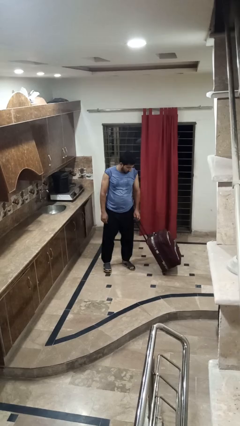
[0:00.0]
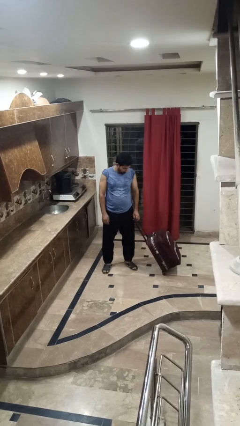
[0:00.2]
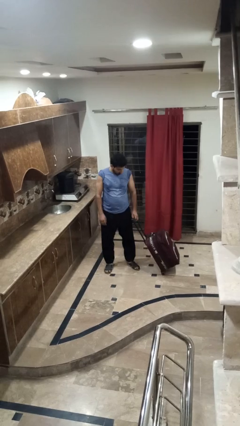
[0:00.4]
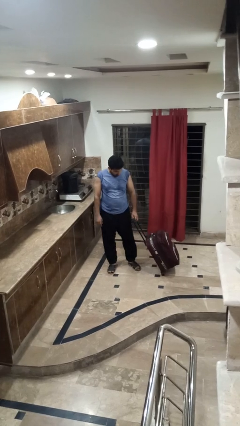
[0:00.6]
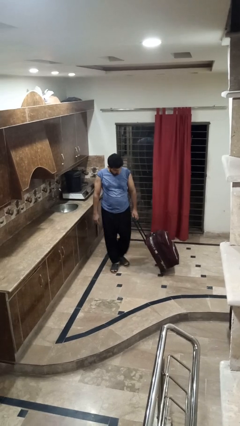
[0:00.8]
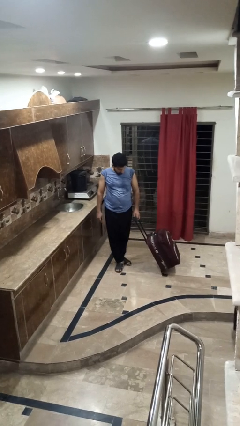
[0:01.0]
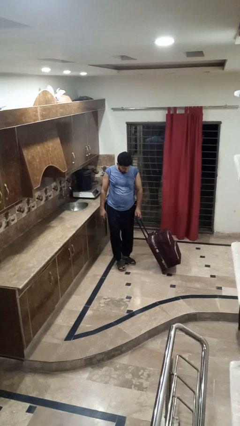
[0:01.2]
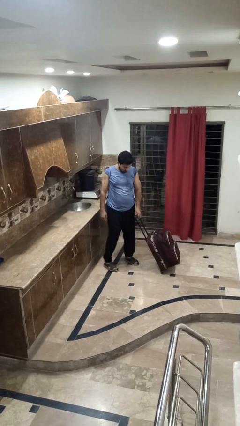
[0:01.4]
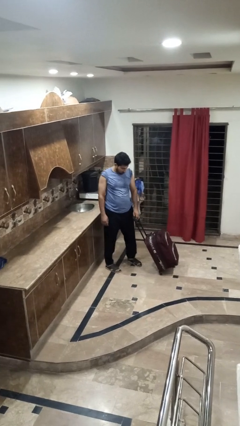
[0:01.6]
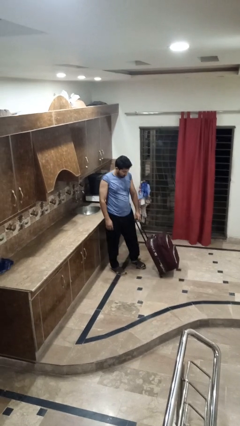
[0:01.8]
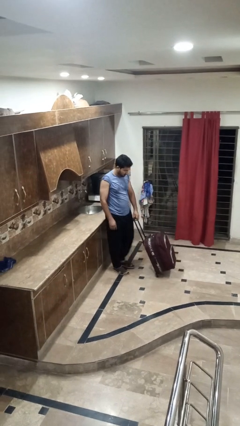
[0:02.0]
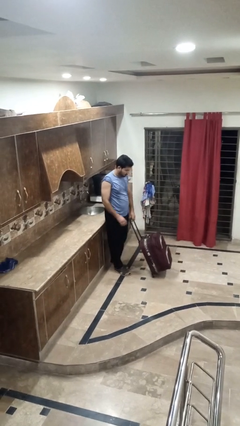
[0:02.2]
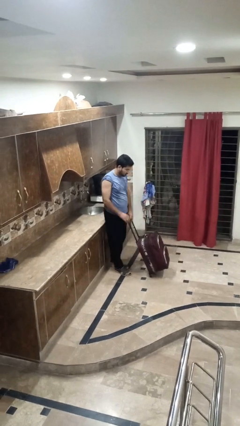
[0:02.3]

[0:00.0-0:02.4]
person pulls wheeled cart

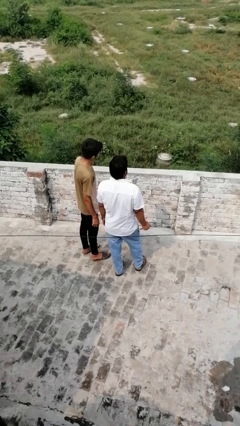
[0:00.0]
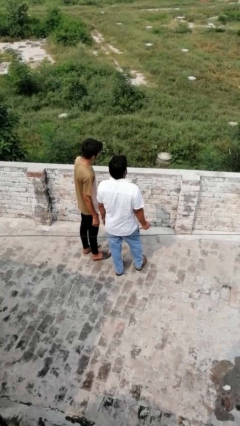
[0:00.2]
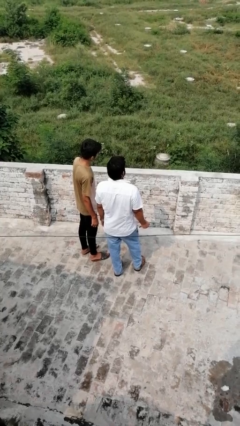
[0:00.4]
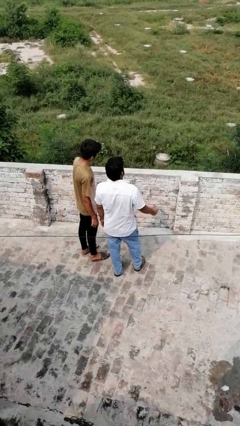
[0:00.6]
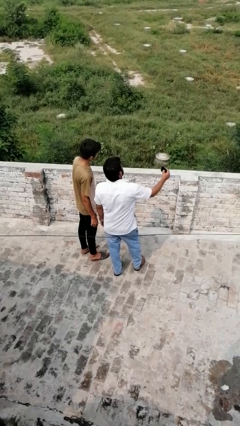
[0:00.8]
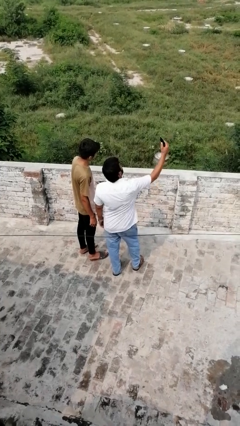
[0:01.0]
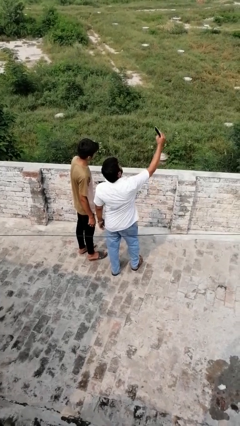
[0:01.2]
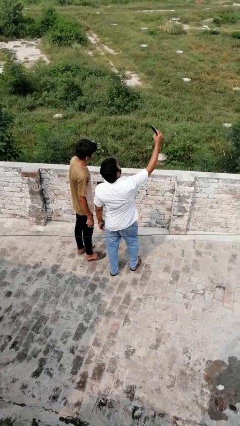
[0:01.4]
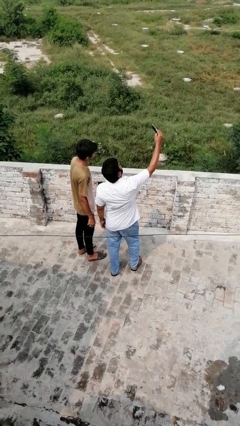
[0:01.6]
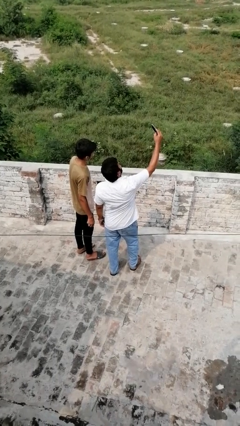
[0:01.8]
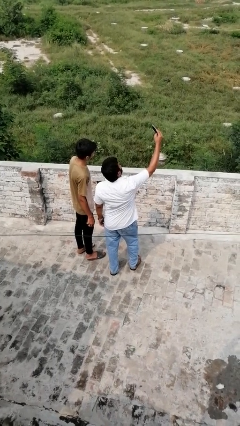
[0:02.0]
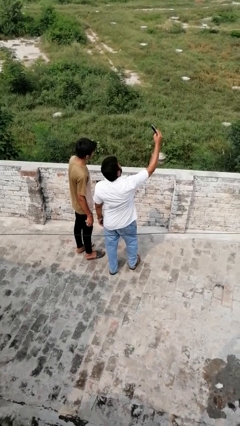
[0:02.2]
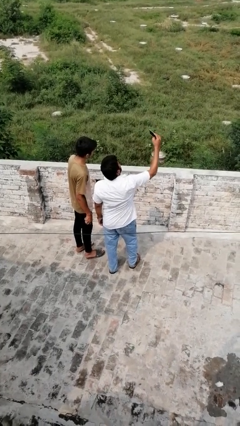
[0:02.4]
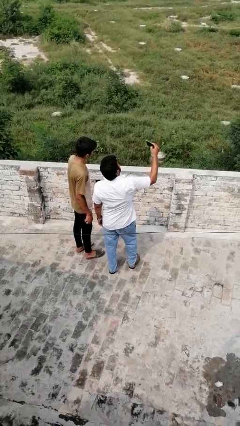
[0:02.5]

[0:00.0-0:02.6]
person takes selfie with person

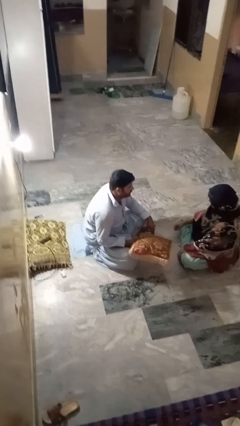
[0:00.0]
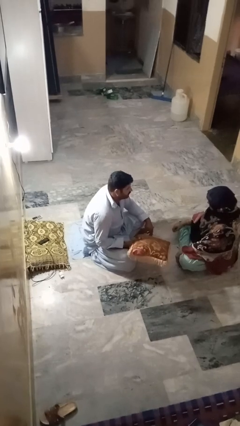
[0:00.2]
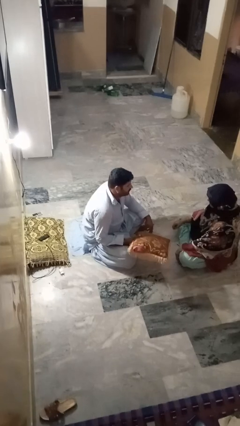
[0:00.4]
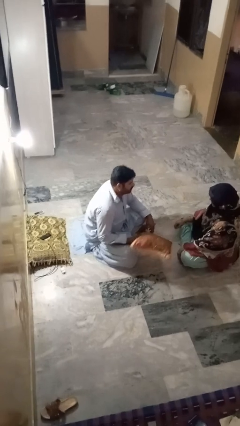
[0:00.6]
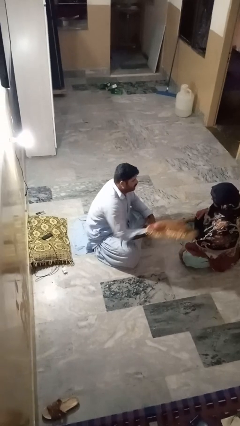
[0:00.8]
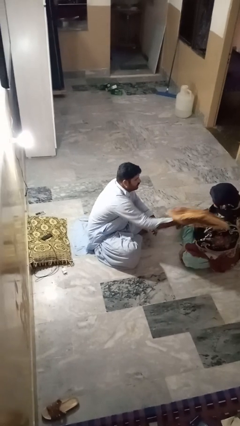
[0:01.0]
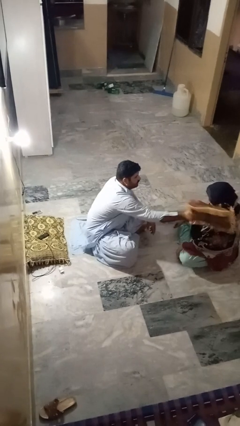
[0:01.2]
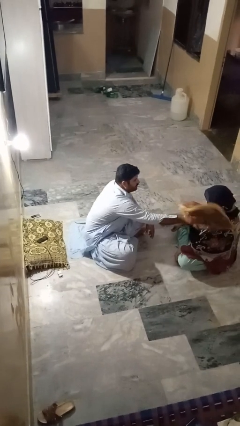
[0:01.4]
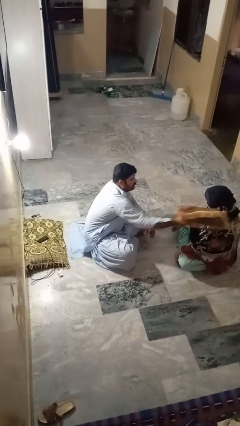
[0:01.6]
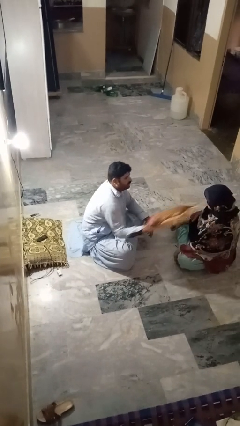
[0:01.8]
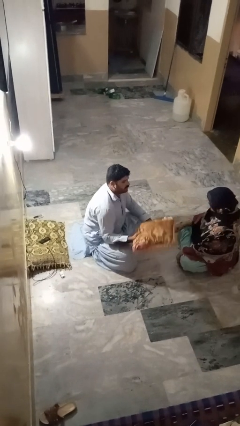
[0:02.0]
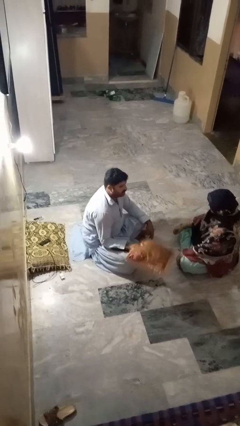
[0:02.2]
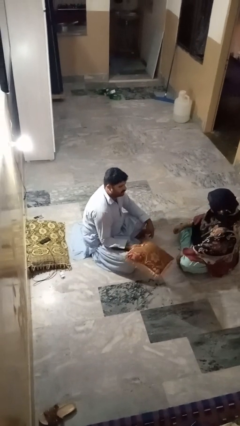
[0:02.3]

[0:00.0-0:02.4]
person hits person with pillow

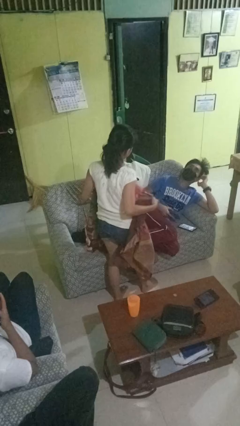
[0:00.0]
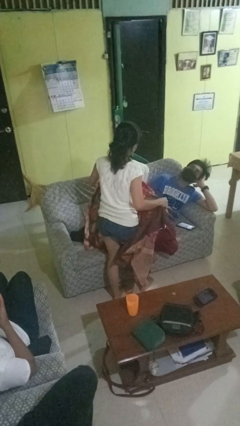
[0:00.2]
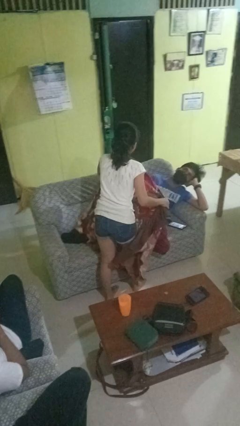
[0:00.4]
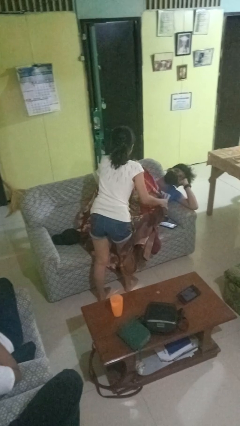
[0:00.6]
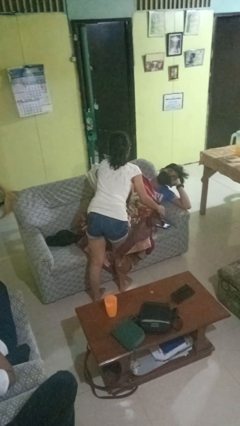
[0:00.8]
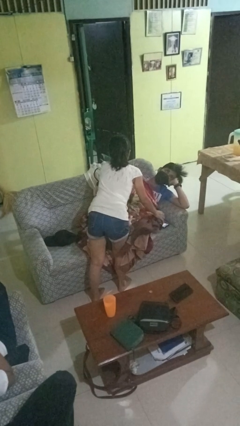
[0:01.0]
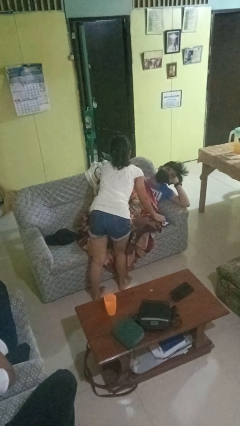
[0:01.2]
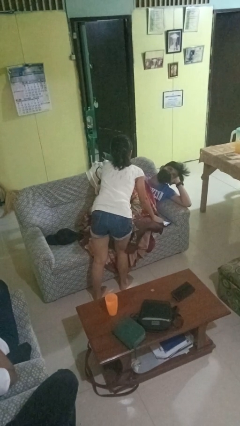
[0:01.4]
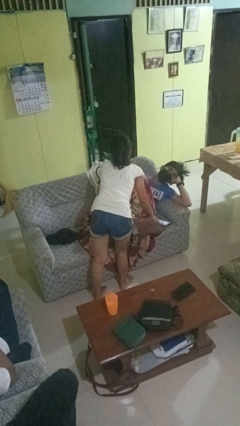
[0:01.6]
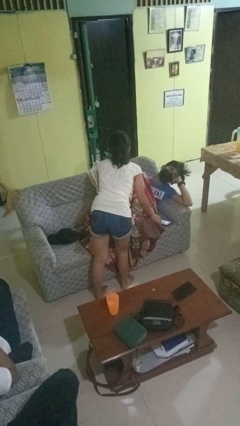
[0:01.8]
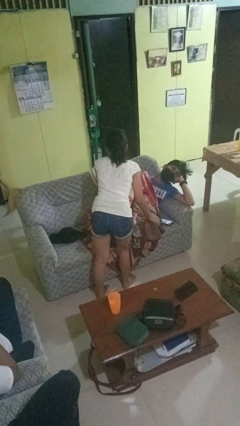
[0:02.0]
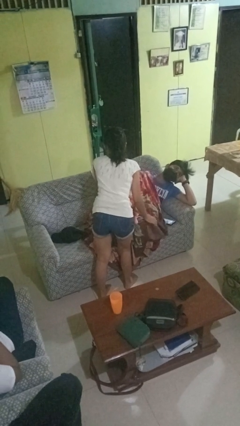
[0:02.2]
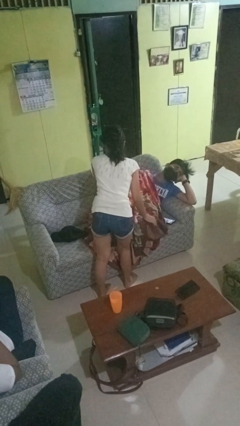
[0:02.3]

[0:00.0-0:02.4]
person covers friend with blanket

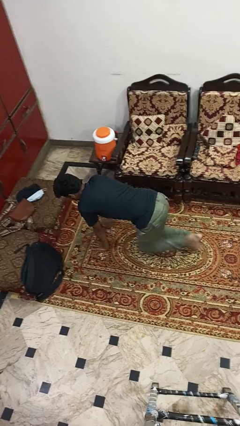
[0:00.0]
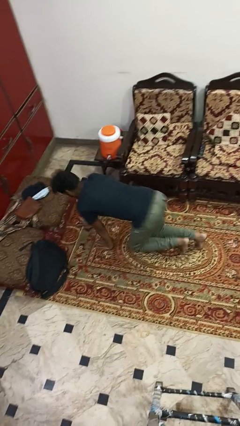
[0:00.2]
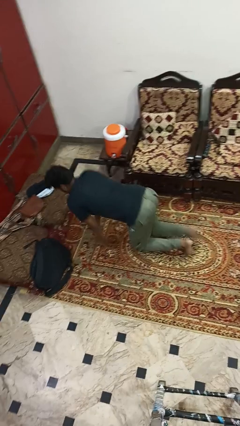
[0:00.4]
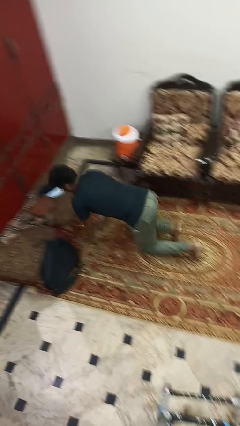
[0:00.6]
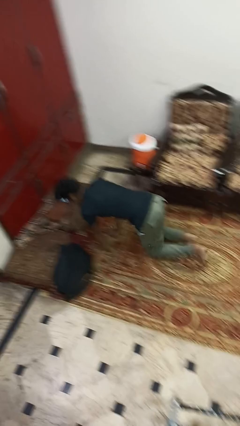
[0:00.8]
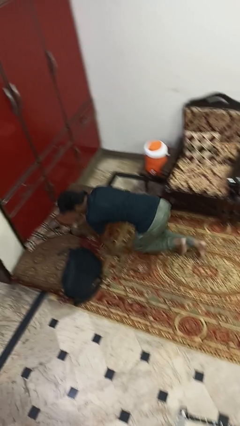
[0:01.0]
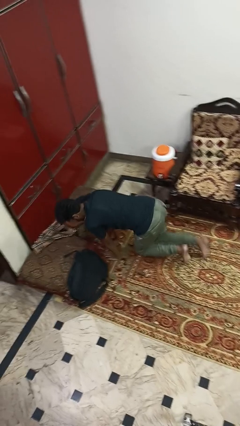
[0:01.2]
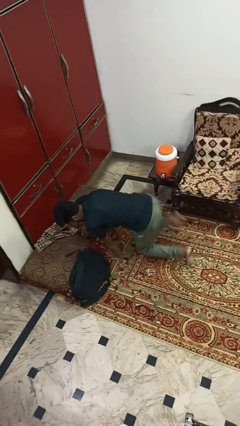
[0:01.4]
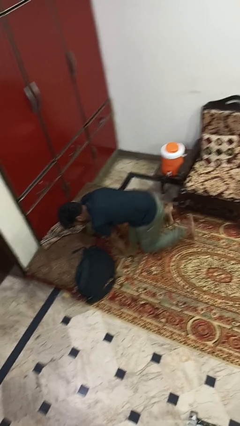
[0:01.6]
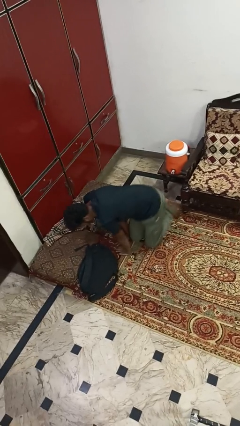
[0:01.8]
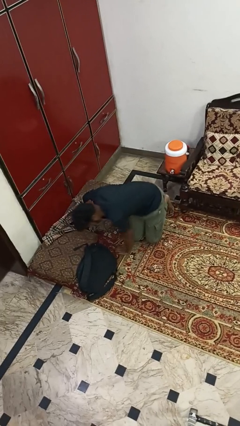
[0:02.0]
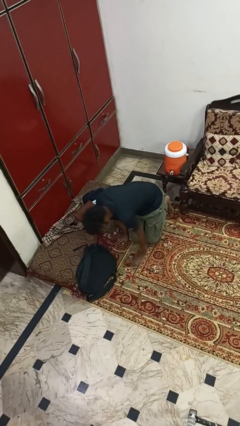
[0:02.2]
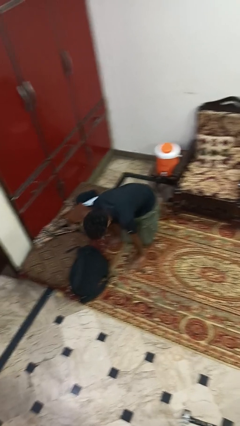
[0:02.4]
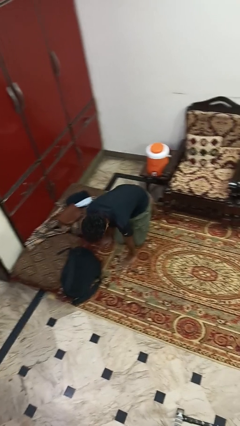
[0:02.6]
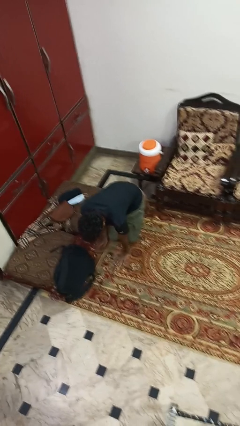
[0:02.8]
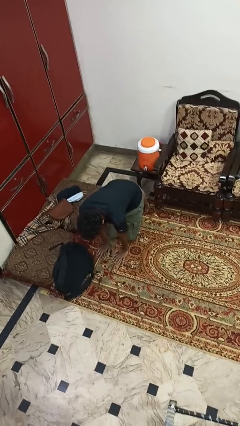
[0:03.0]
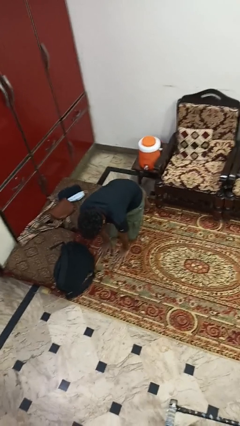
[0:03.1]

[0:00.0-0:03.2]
person crawls

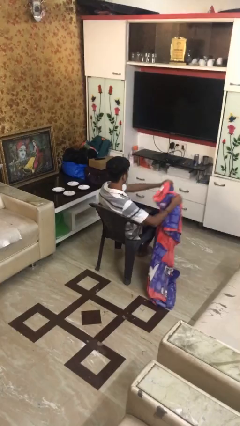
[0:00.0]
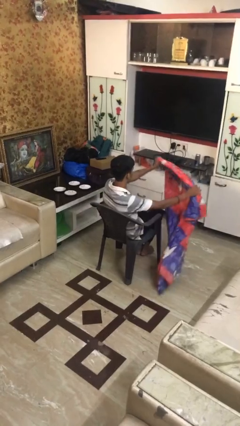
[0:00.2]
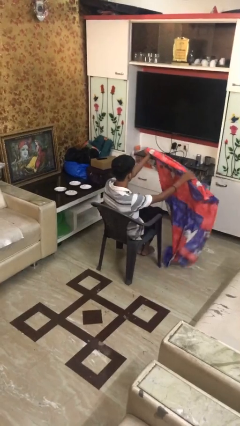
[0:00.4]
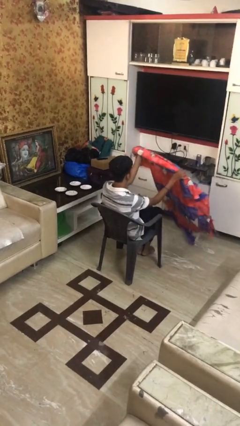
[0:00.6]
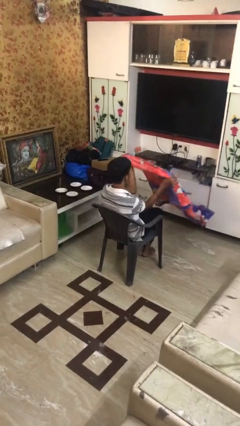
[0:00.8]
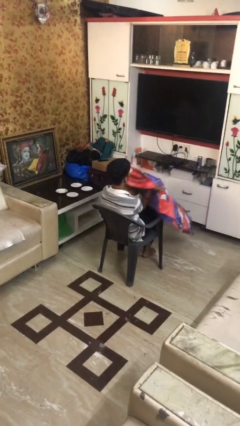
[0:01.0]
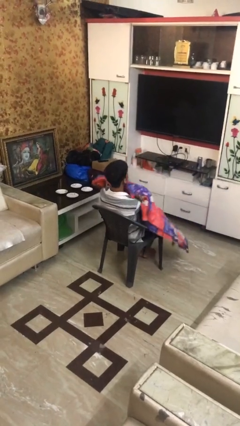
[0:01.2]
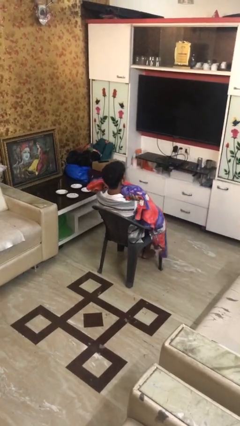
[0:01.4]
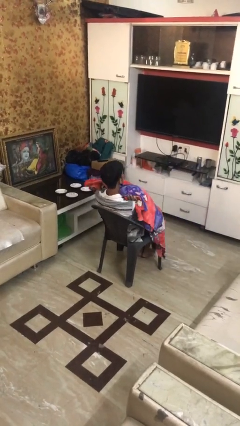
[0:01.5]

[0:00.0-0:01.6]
person covers with blanket

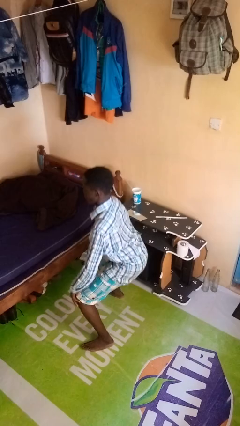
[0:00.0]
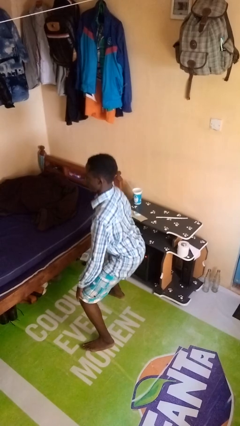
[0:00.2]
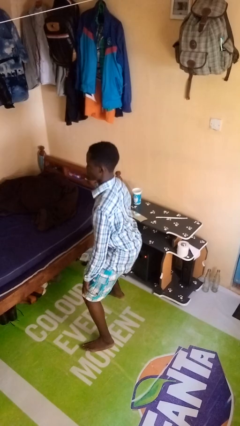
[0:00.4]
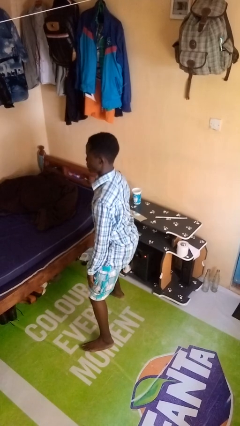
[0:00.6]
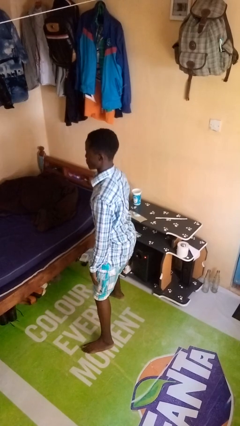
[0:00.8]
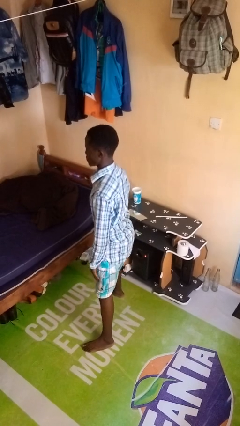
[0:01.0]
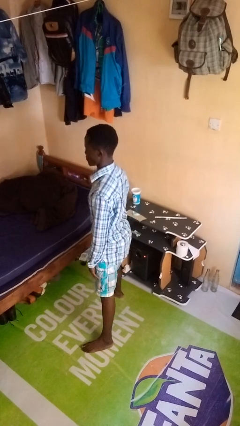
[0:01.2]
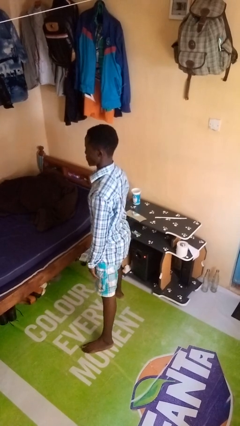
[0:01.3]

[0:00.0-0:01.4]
person stands up

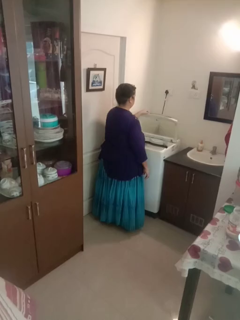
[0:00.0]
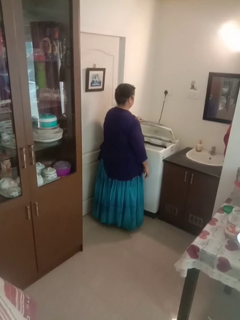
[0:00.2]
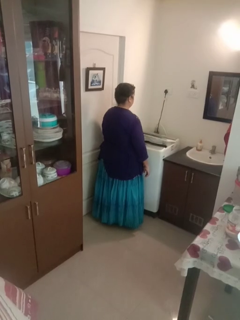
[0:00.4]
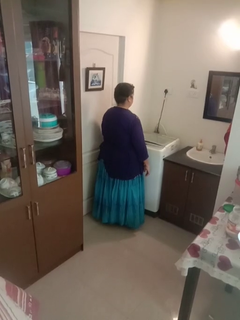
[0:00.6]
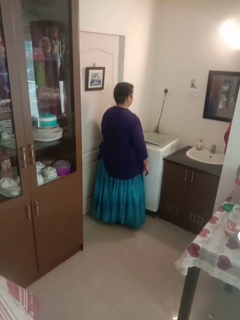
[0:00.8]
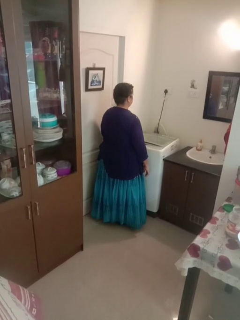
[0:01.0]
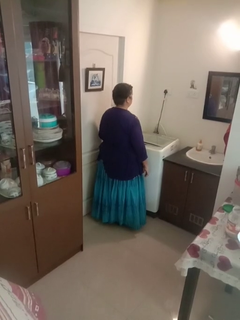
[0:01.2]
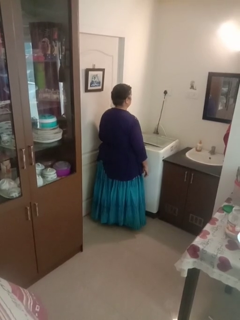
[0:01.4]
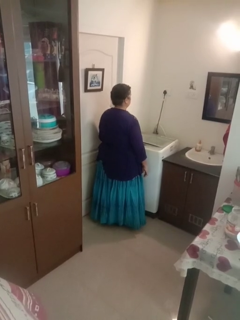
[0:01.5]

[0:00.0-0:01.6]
person closes clothes washer
